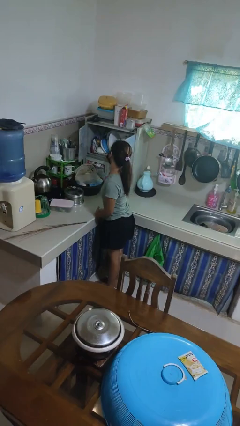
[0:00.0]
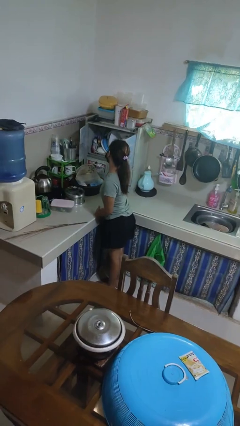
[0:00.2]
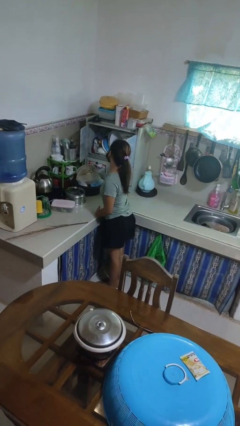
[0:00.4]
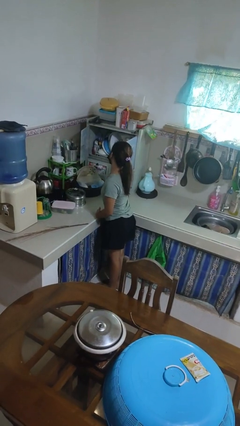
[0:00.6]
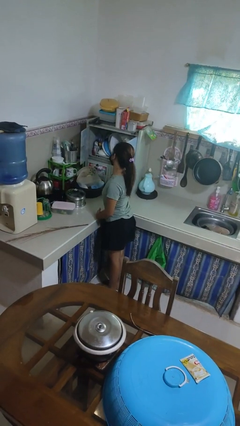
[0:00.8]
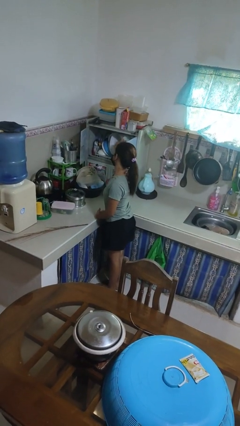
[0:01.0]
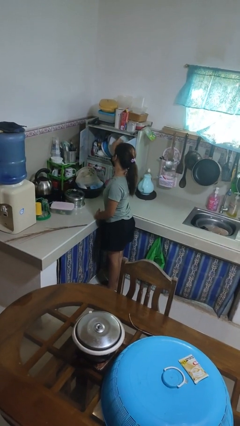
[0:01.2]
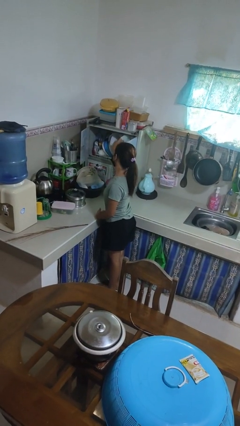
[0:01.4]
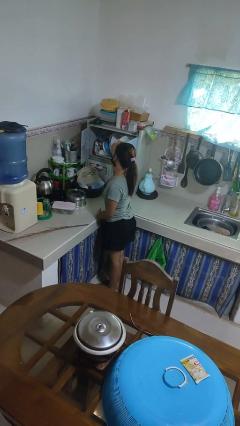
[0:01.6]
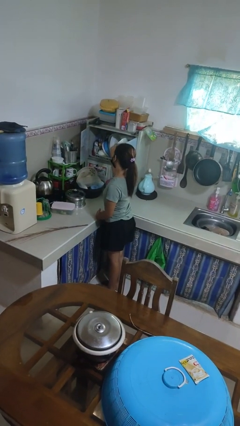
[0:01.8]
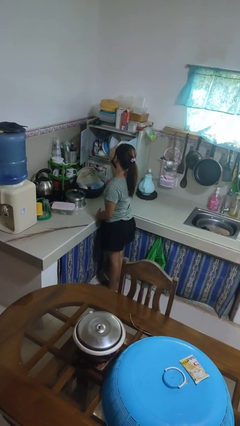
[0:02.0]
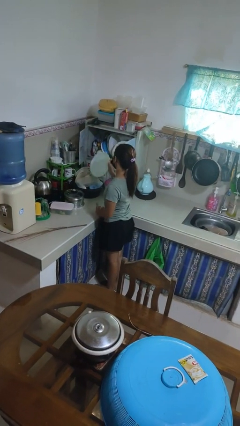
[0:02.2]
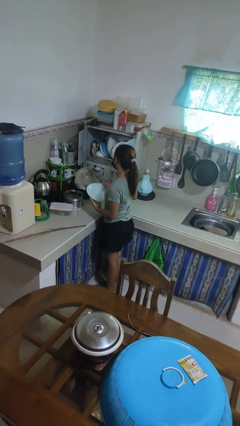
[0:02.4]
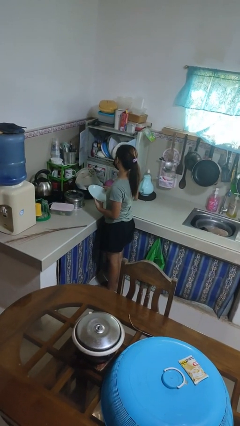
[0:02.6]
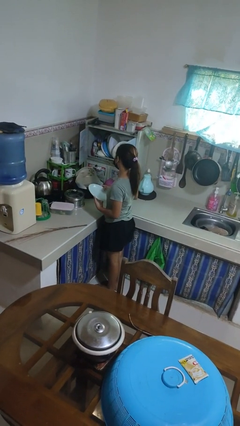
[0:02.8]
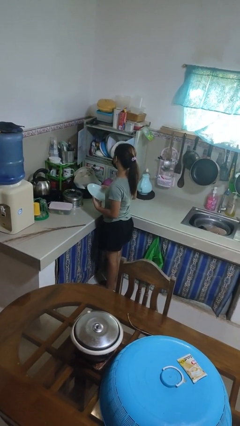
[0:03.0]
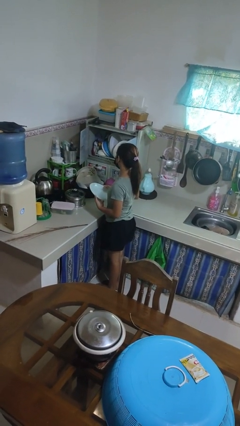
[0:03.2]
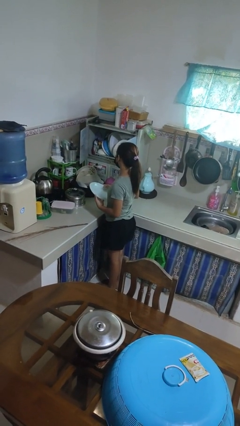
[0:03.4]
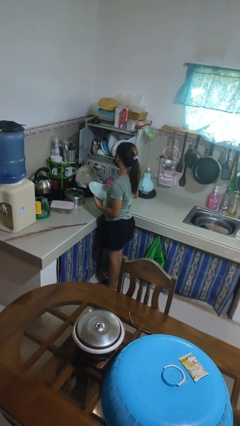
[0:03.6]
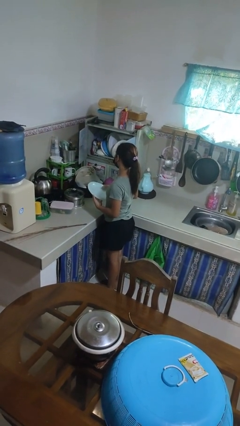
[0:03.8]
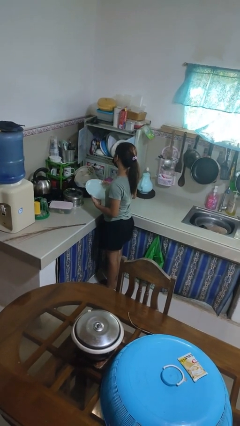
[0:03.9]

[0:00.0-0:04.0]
person takes object from kitchen drawer

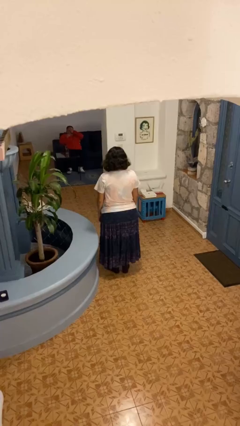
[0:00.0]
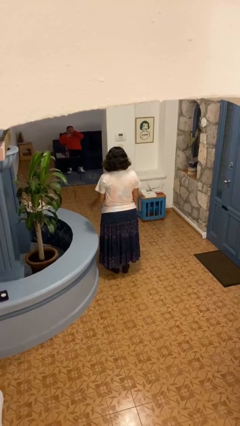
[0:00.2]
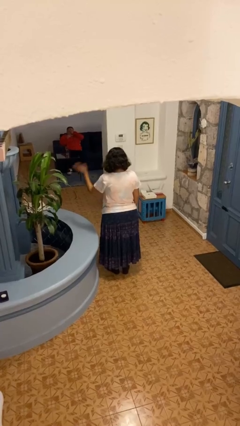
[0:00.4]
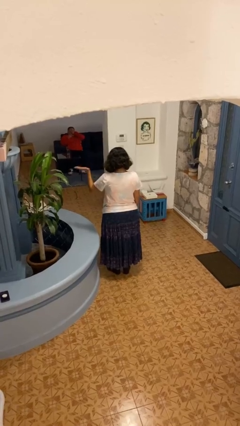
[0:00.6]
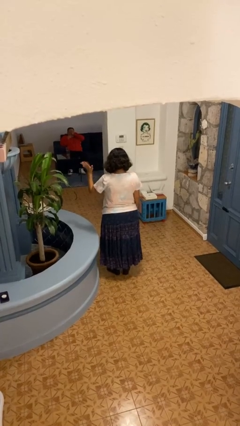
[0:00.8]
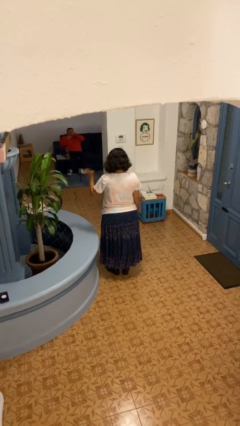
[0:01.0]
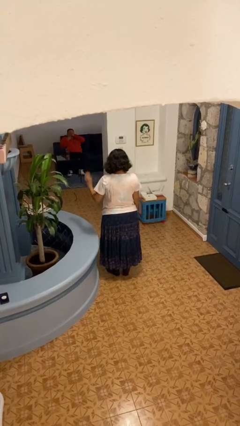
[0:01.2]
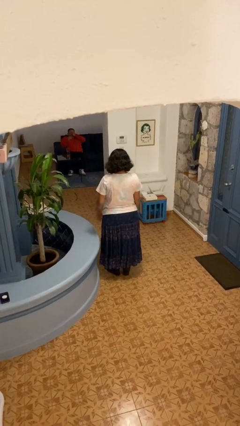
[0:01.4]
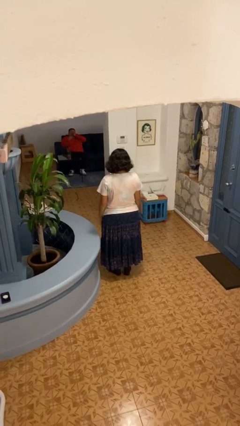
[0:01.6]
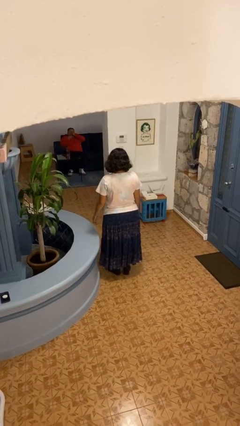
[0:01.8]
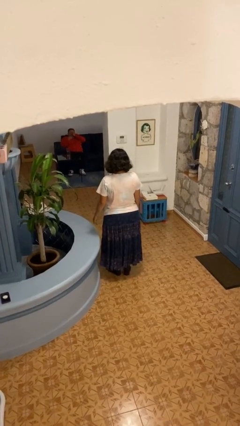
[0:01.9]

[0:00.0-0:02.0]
person waves at person

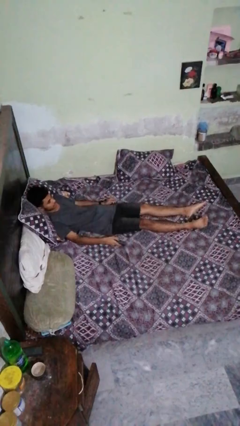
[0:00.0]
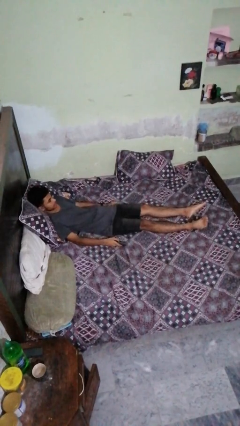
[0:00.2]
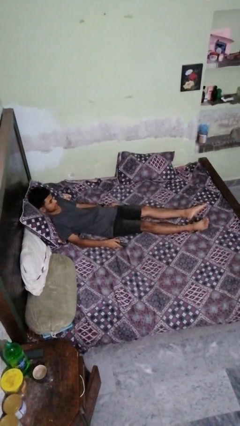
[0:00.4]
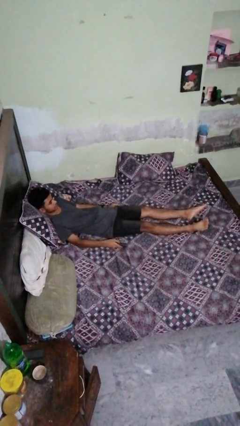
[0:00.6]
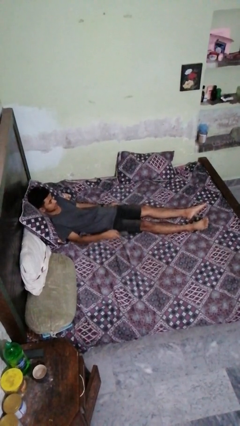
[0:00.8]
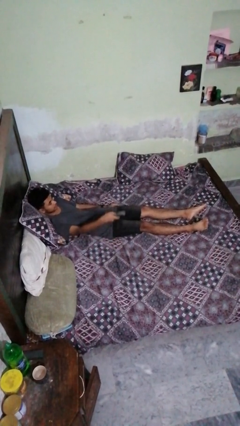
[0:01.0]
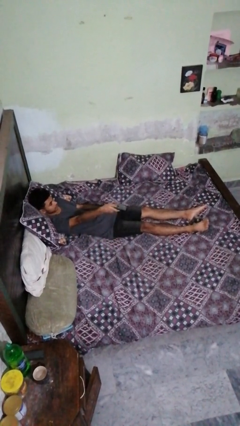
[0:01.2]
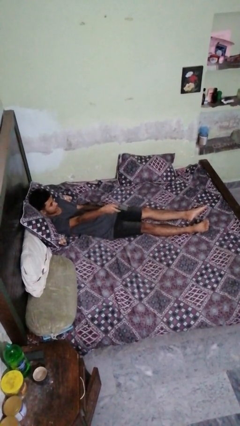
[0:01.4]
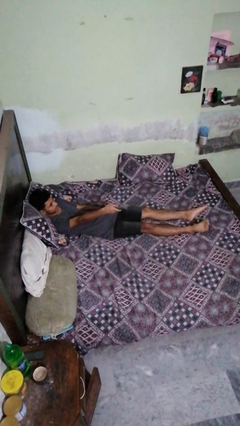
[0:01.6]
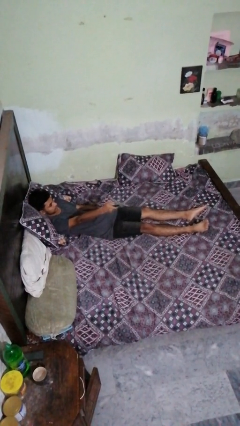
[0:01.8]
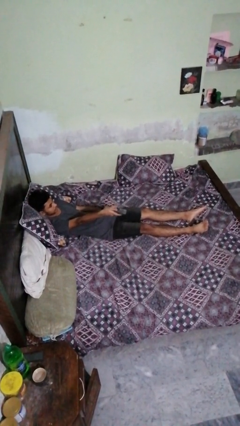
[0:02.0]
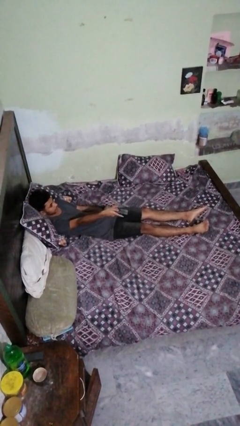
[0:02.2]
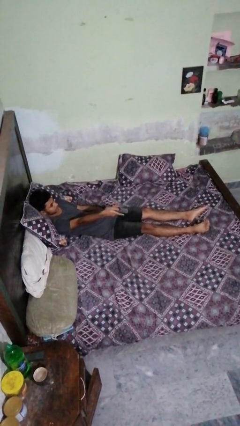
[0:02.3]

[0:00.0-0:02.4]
person uses television remote

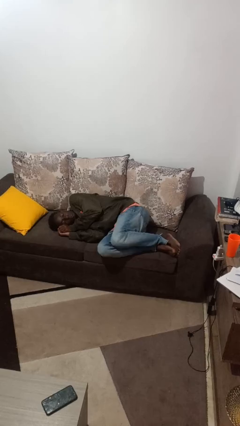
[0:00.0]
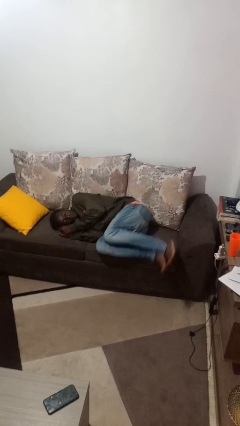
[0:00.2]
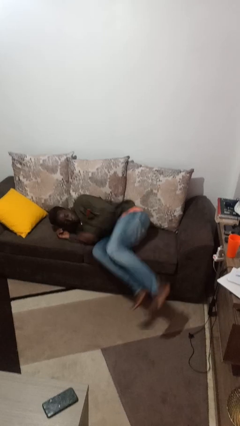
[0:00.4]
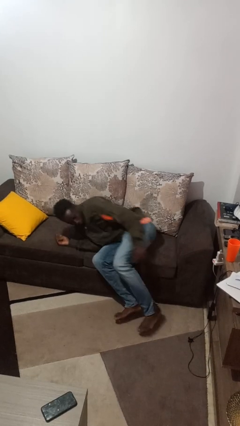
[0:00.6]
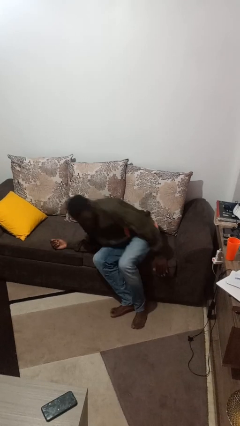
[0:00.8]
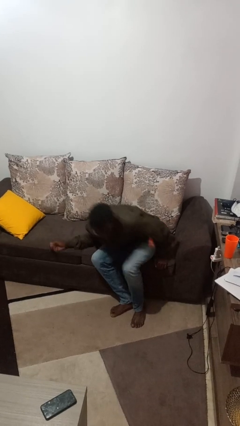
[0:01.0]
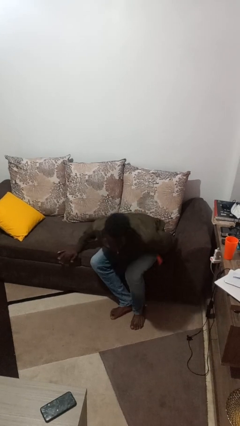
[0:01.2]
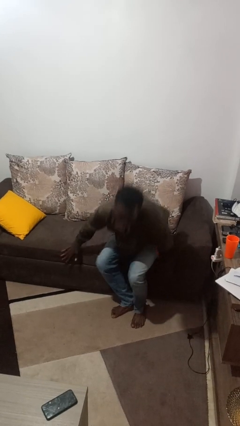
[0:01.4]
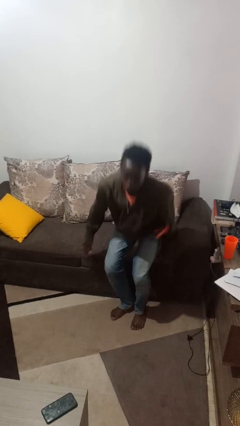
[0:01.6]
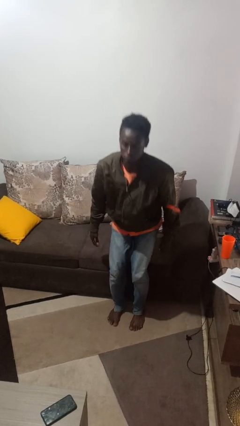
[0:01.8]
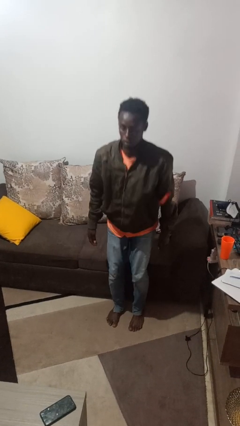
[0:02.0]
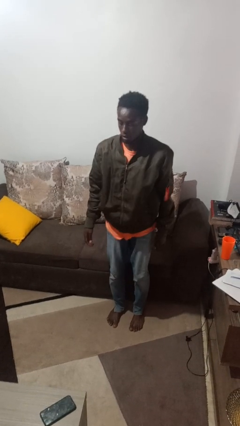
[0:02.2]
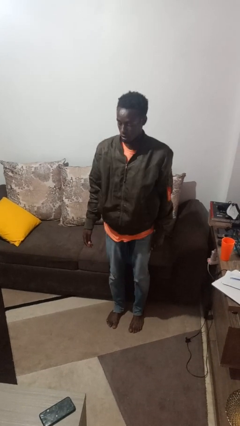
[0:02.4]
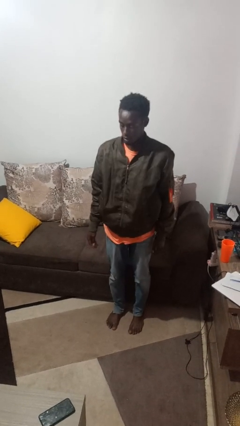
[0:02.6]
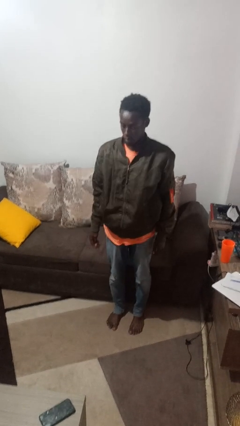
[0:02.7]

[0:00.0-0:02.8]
person stands up

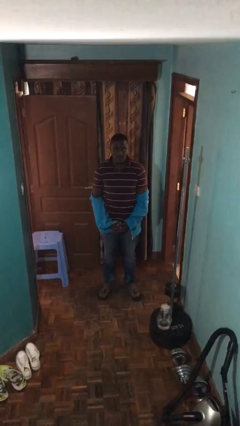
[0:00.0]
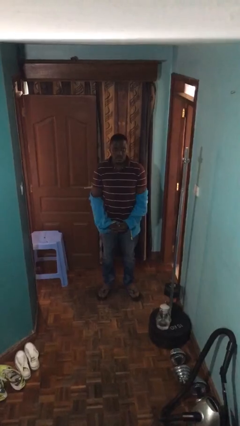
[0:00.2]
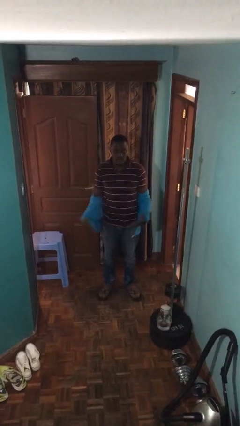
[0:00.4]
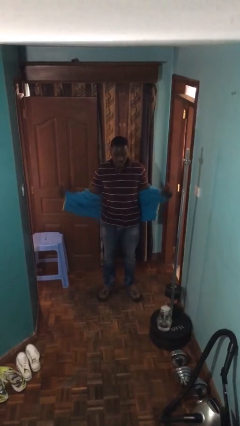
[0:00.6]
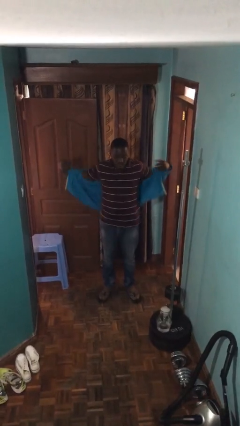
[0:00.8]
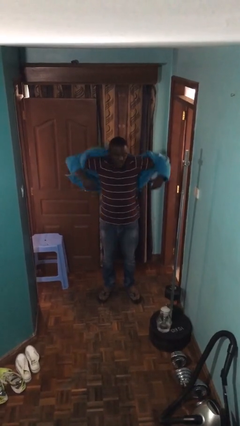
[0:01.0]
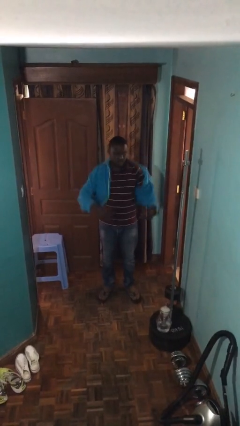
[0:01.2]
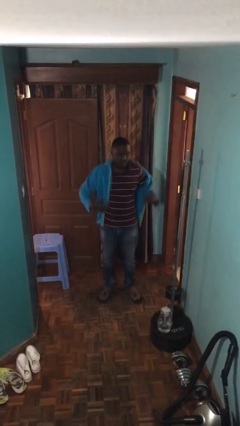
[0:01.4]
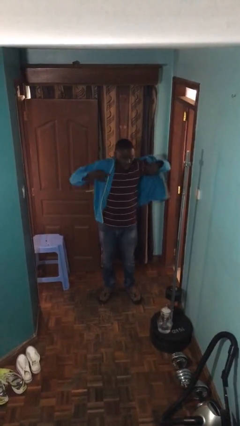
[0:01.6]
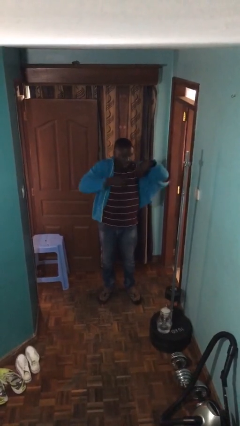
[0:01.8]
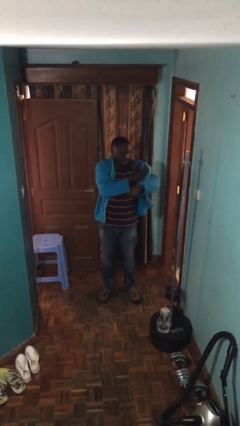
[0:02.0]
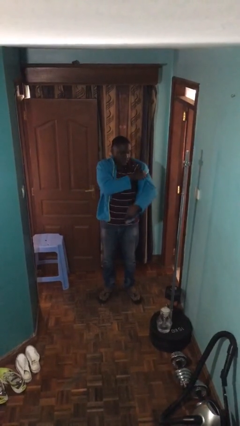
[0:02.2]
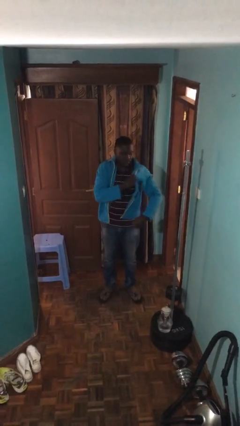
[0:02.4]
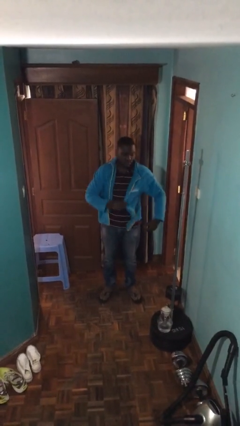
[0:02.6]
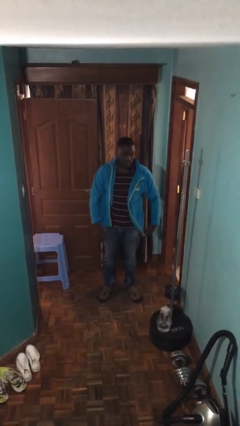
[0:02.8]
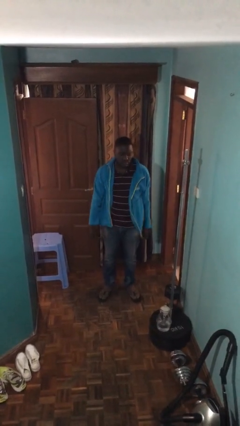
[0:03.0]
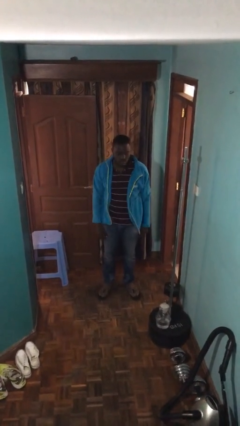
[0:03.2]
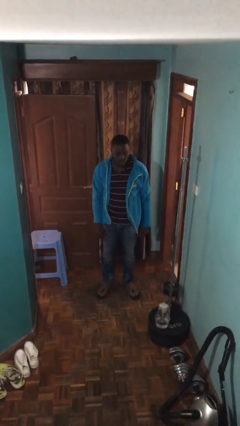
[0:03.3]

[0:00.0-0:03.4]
person puts on jacket

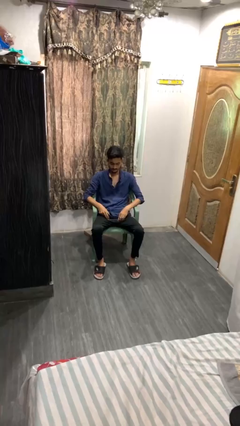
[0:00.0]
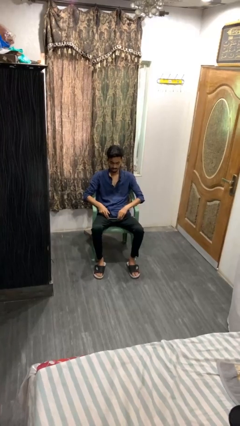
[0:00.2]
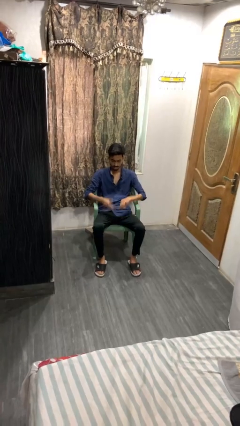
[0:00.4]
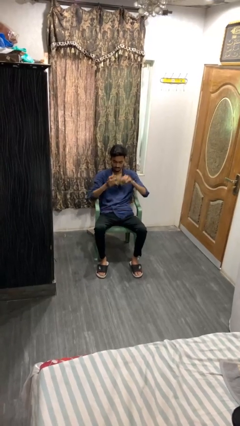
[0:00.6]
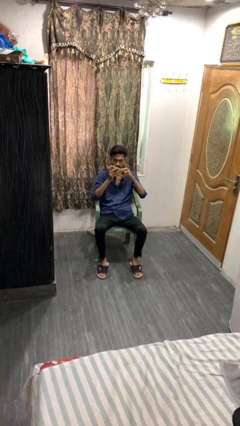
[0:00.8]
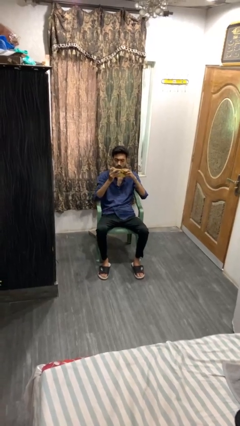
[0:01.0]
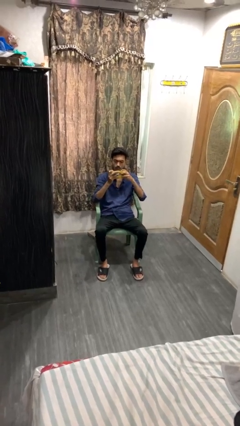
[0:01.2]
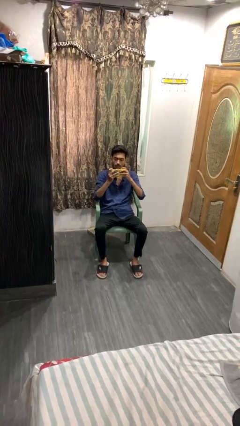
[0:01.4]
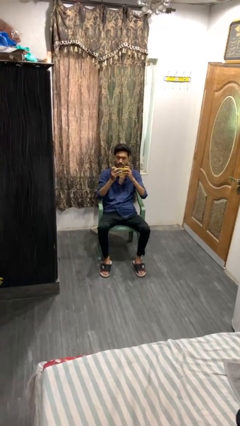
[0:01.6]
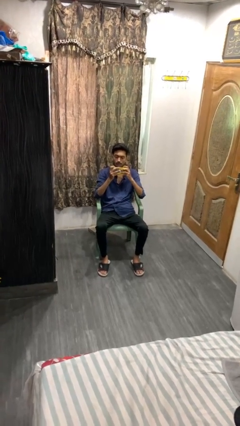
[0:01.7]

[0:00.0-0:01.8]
person interacts with handheld game

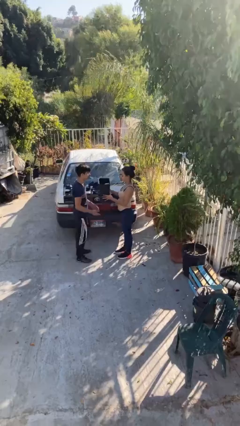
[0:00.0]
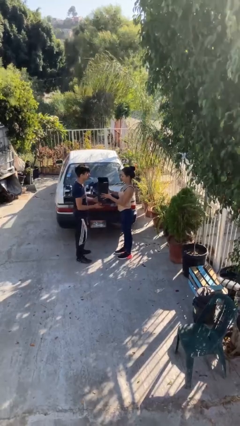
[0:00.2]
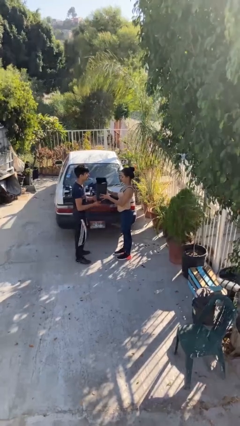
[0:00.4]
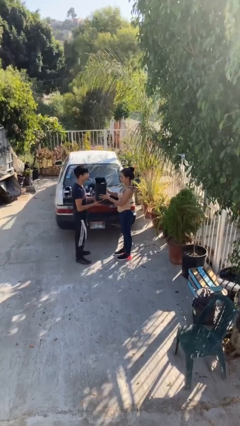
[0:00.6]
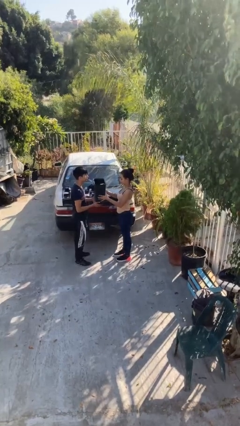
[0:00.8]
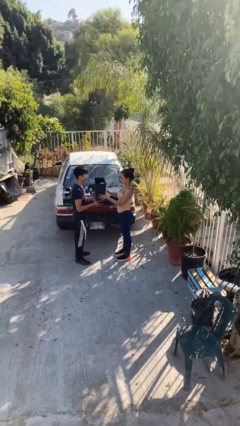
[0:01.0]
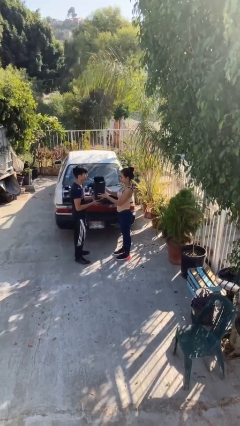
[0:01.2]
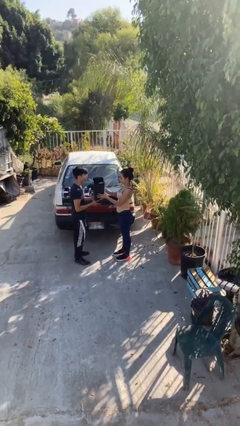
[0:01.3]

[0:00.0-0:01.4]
person transfers object to person
